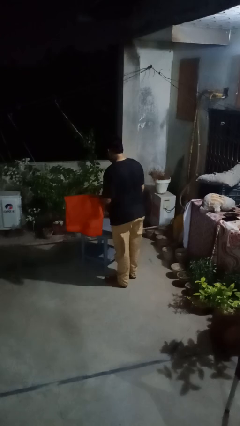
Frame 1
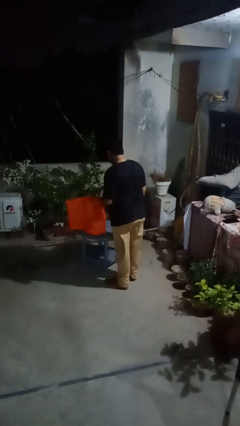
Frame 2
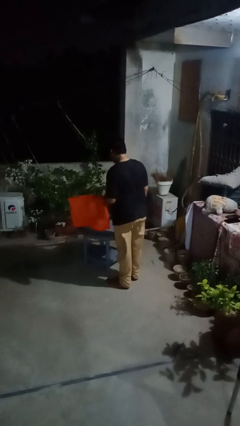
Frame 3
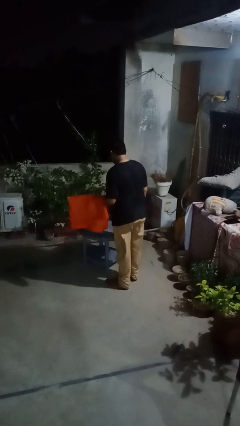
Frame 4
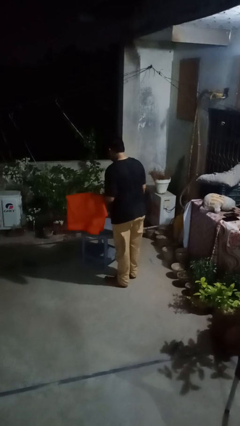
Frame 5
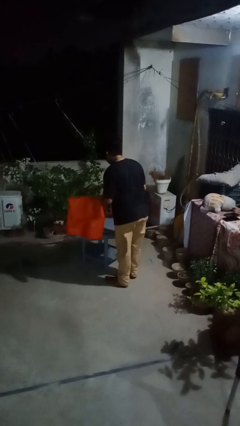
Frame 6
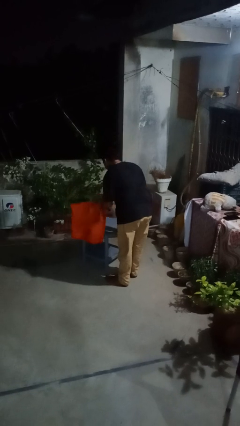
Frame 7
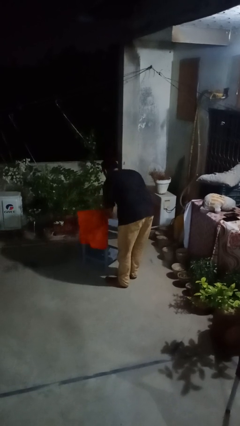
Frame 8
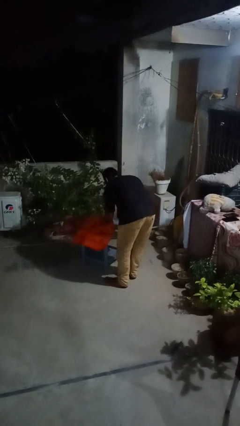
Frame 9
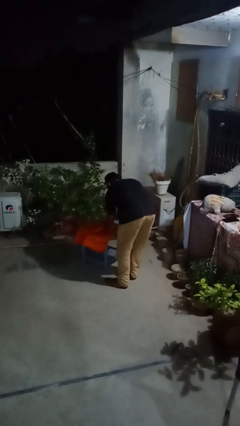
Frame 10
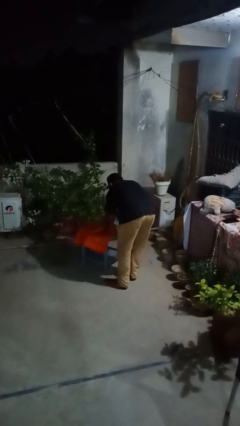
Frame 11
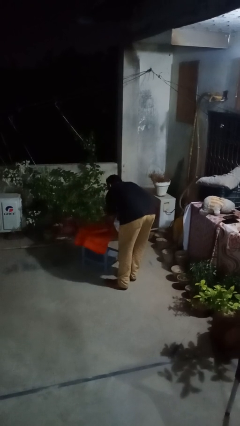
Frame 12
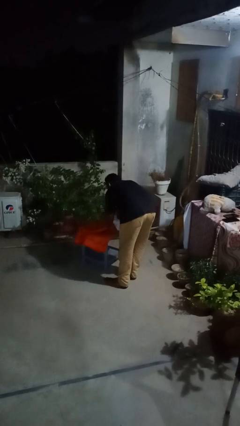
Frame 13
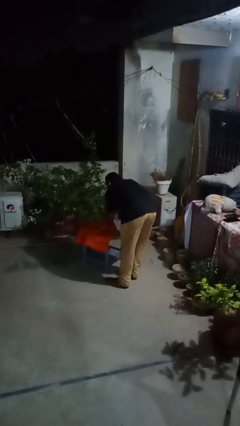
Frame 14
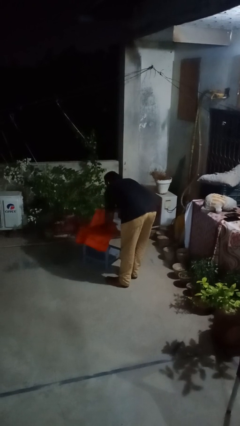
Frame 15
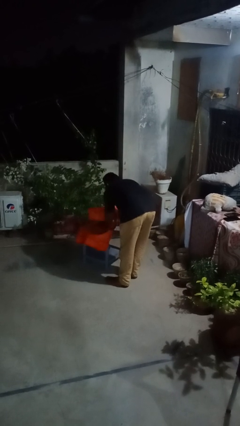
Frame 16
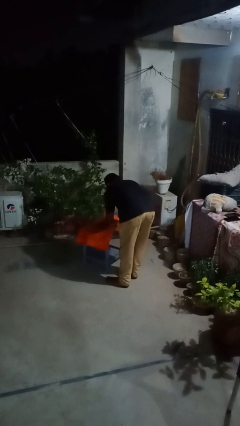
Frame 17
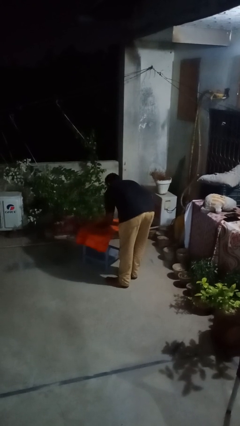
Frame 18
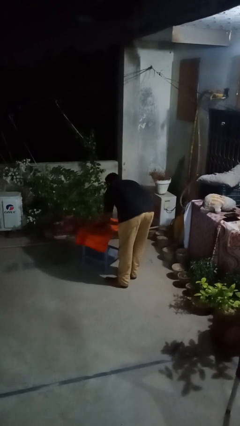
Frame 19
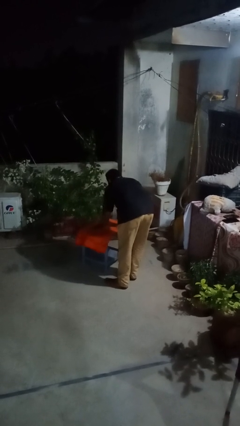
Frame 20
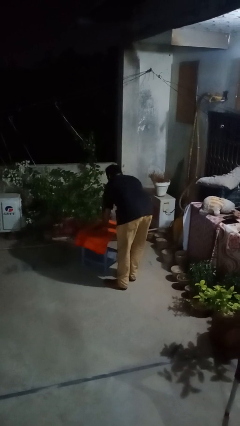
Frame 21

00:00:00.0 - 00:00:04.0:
person spreads tablecloth

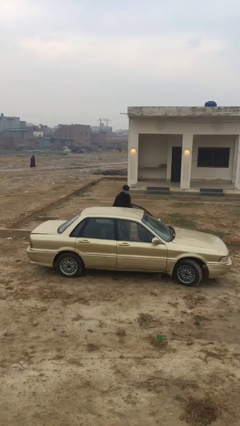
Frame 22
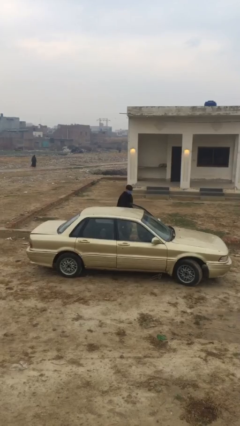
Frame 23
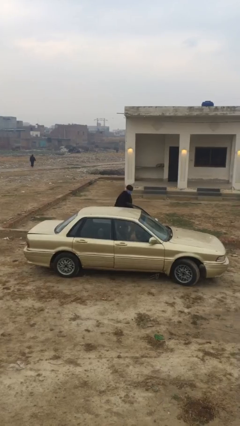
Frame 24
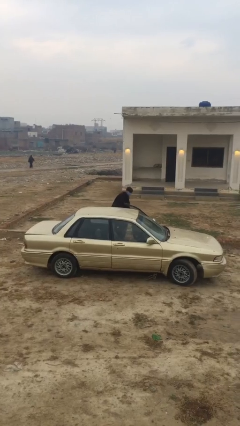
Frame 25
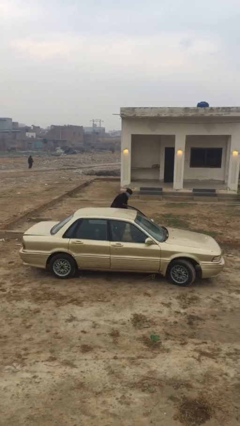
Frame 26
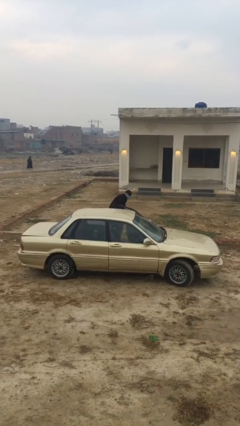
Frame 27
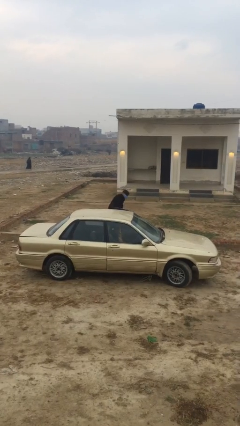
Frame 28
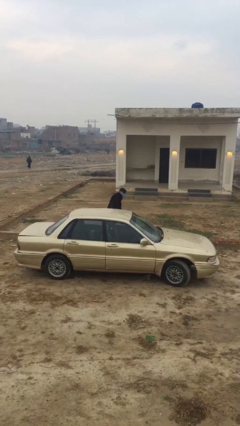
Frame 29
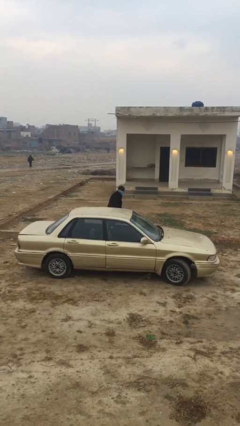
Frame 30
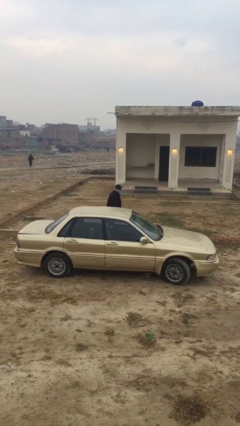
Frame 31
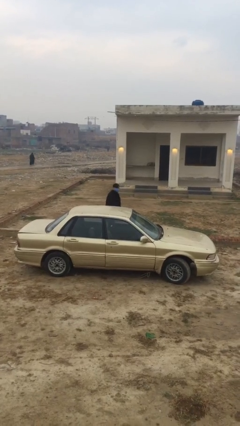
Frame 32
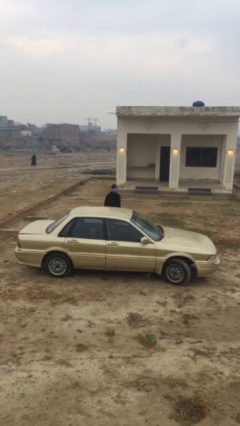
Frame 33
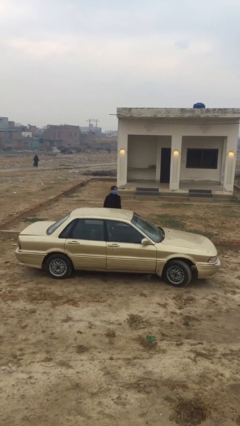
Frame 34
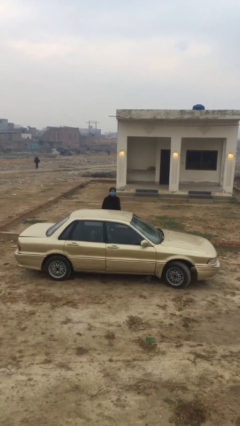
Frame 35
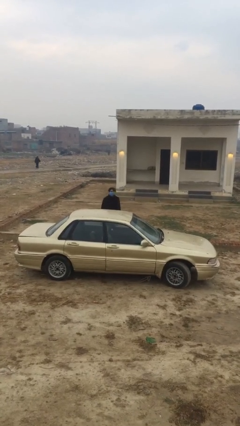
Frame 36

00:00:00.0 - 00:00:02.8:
person closes car door

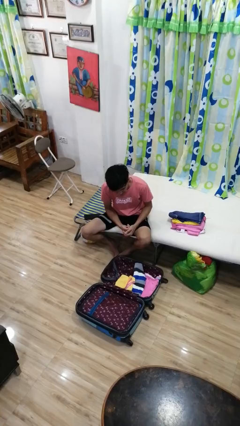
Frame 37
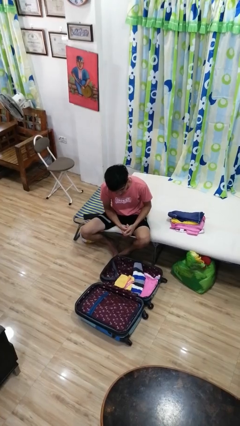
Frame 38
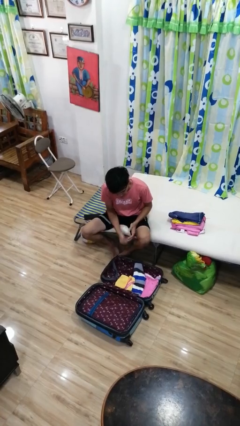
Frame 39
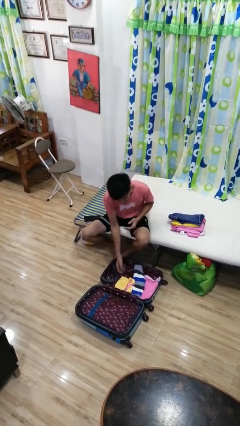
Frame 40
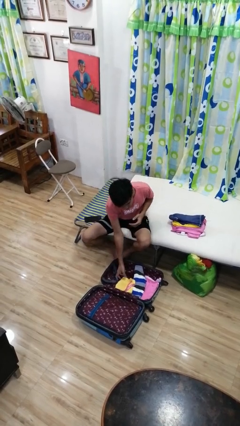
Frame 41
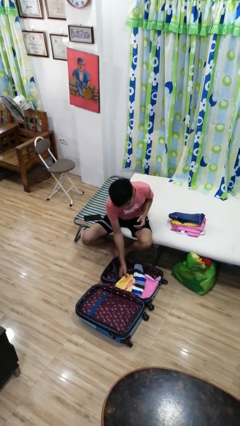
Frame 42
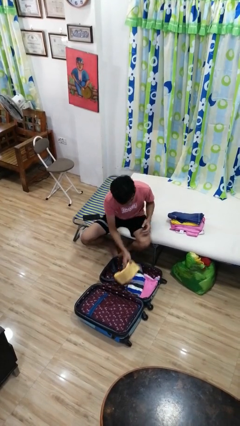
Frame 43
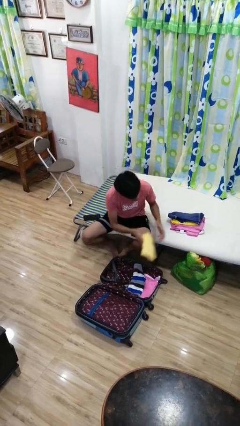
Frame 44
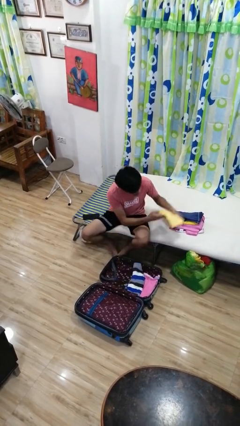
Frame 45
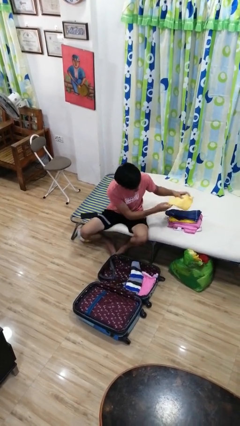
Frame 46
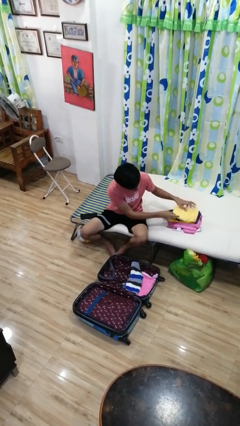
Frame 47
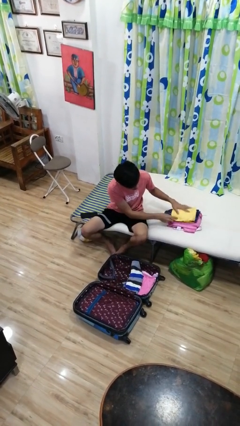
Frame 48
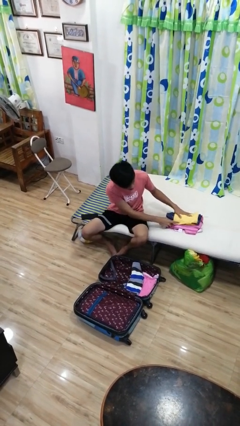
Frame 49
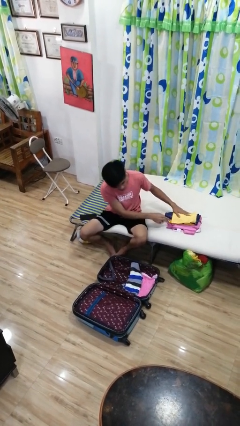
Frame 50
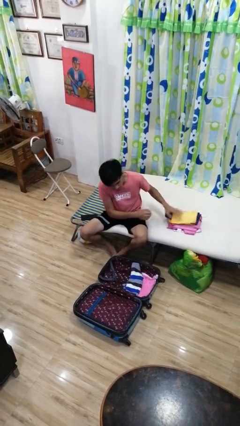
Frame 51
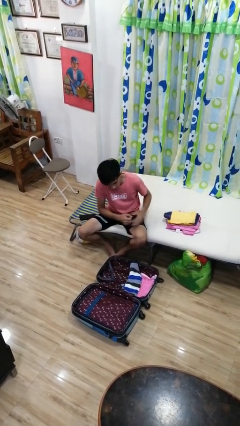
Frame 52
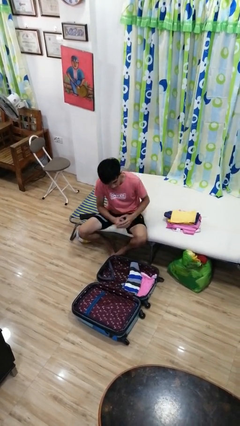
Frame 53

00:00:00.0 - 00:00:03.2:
person unloads clothes from suitcase

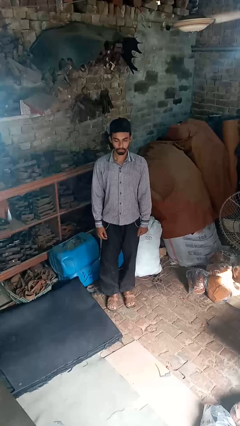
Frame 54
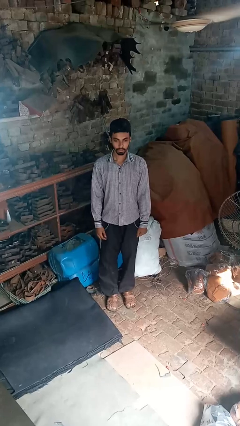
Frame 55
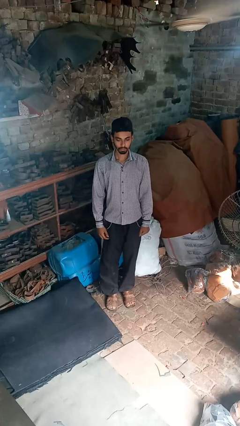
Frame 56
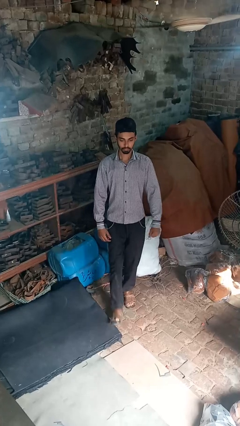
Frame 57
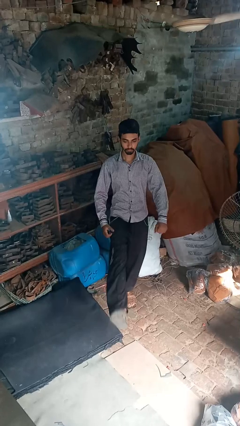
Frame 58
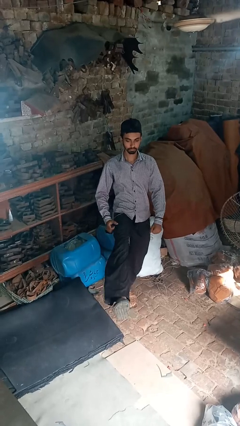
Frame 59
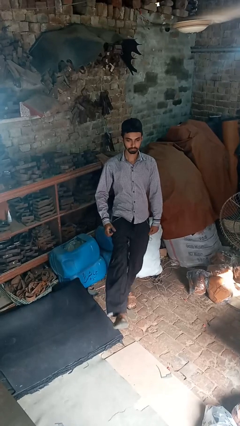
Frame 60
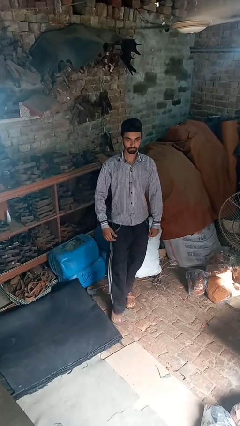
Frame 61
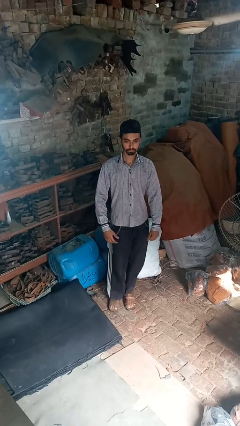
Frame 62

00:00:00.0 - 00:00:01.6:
person karate kicks

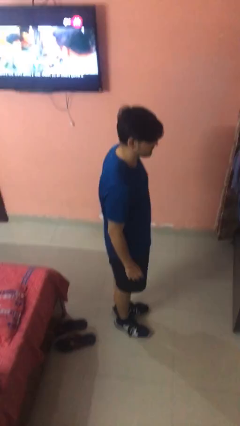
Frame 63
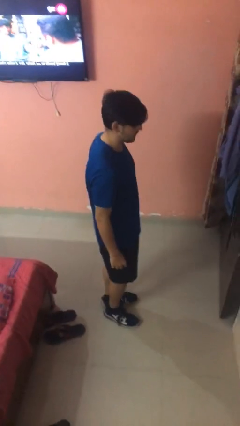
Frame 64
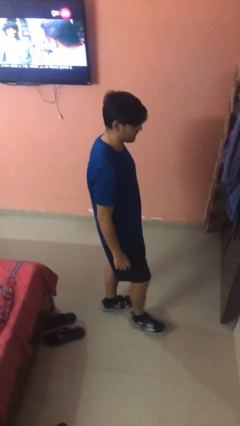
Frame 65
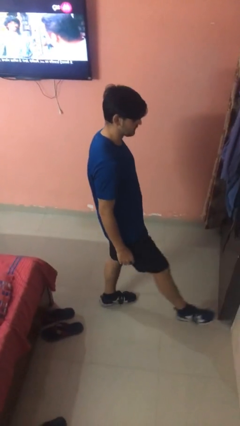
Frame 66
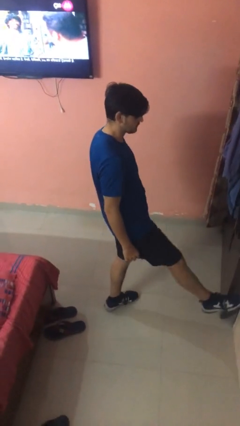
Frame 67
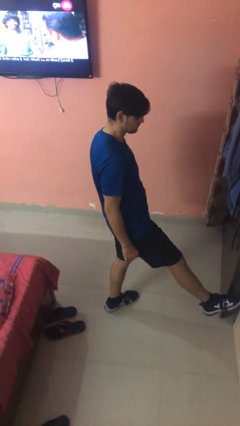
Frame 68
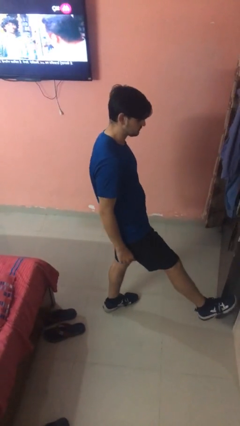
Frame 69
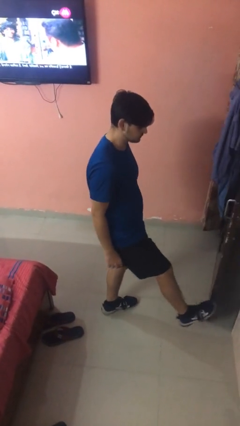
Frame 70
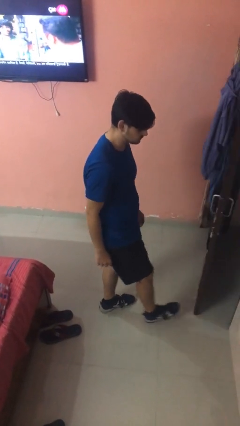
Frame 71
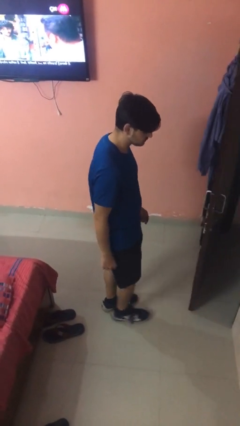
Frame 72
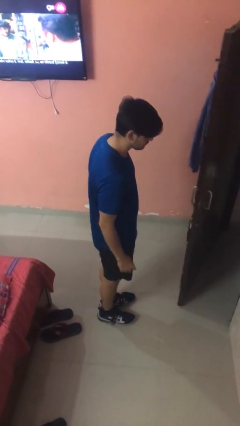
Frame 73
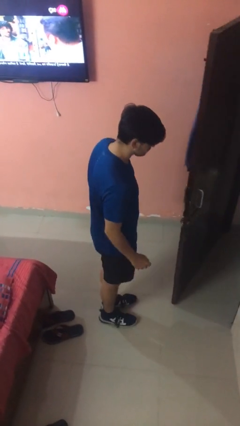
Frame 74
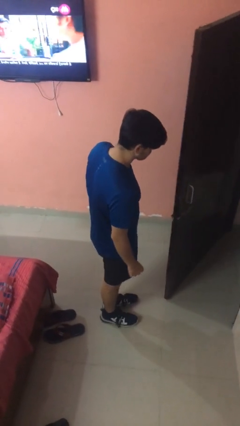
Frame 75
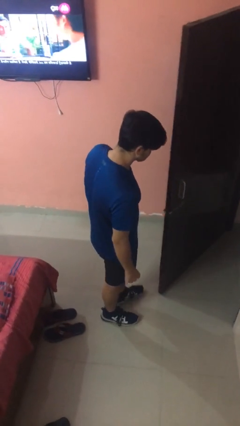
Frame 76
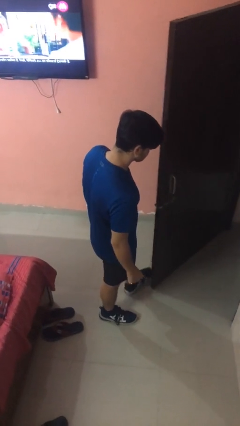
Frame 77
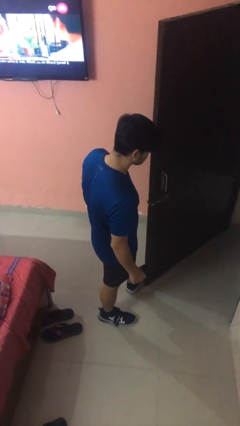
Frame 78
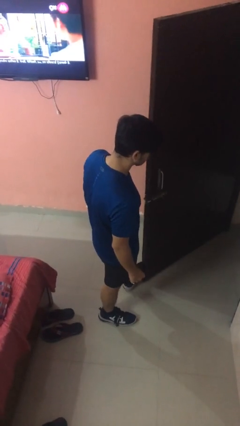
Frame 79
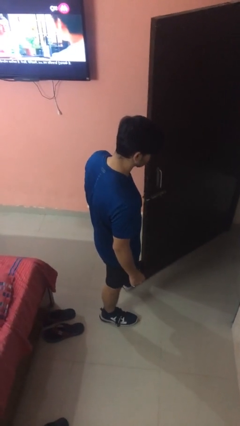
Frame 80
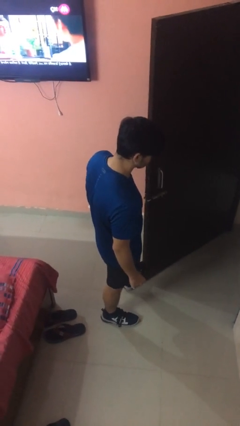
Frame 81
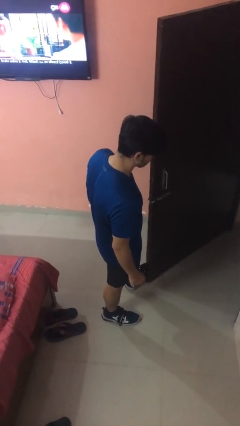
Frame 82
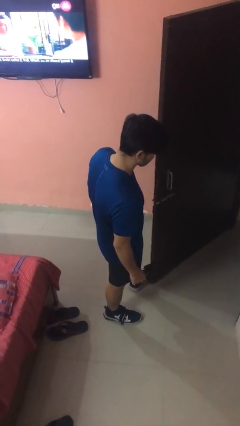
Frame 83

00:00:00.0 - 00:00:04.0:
person opens facility door

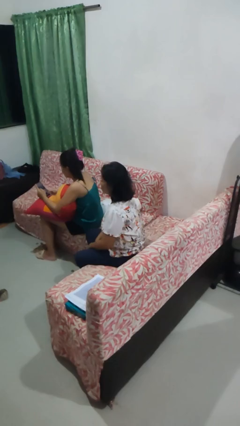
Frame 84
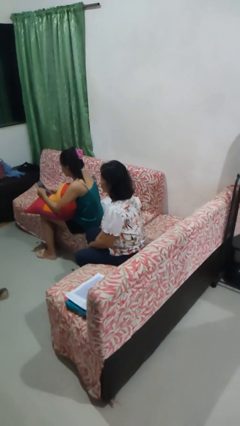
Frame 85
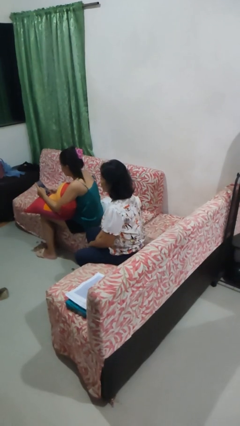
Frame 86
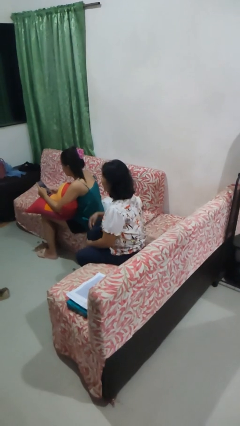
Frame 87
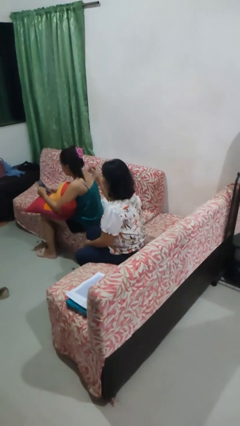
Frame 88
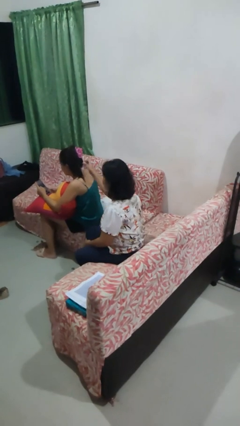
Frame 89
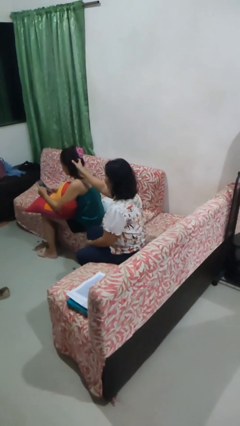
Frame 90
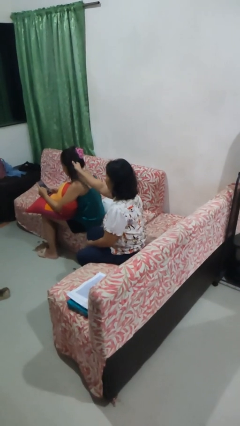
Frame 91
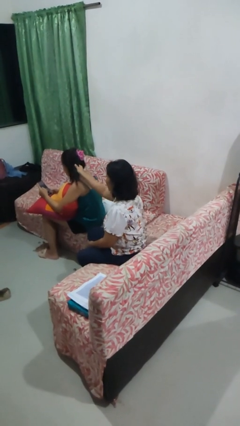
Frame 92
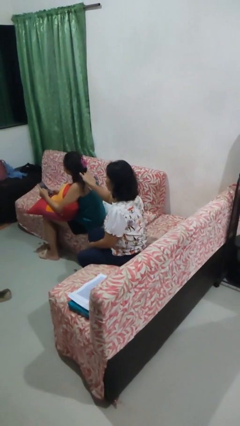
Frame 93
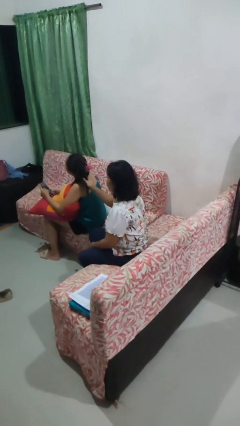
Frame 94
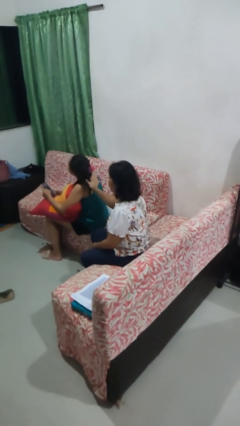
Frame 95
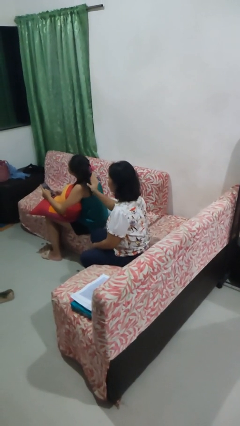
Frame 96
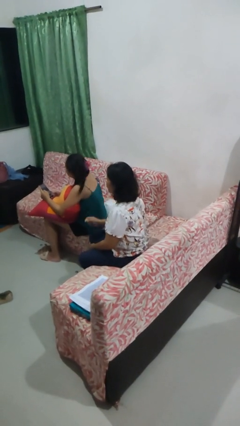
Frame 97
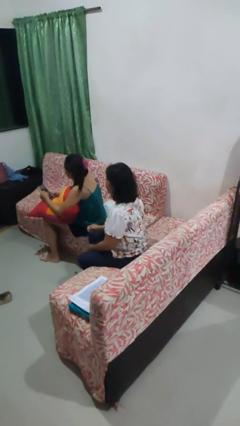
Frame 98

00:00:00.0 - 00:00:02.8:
person grabs person by hair
